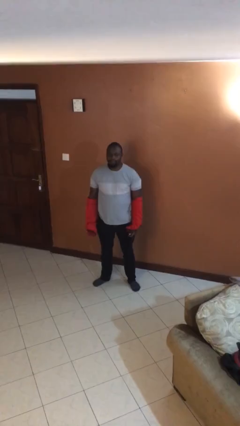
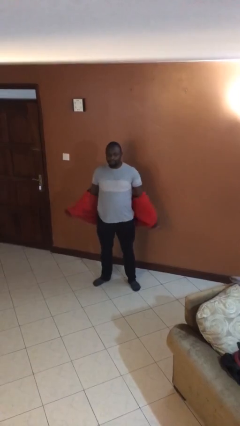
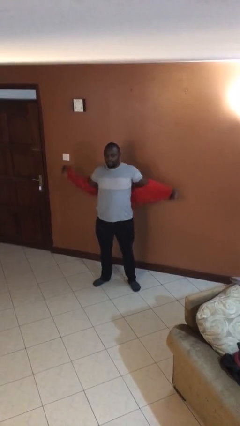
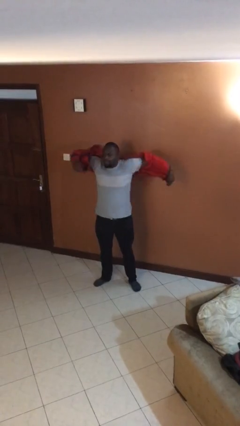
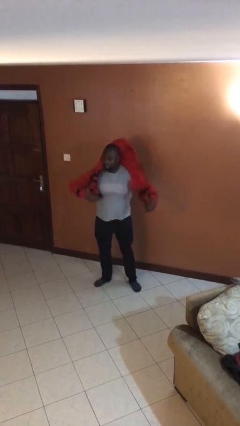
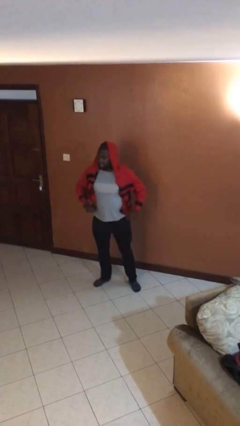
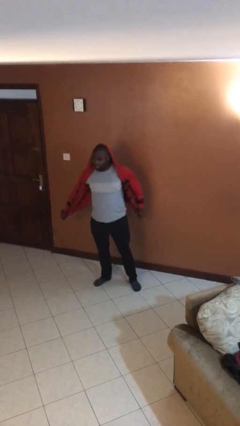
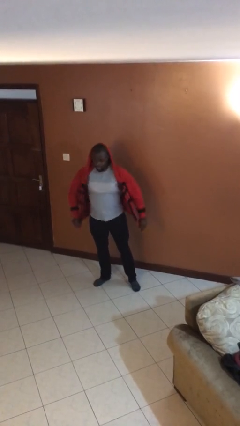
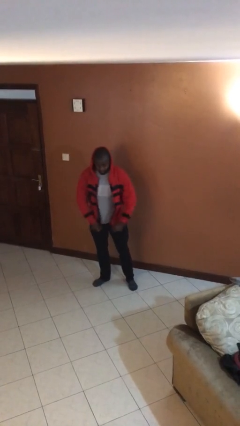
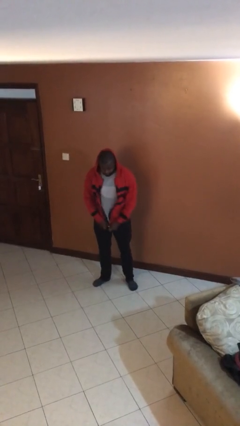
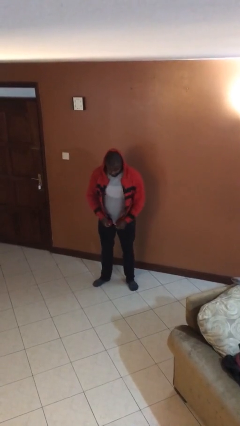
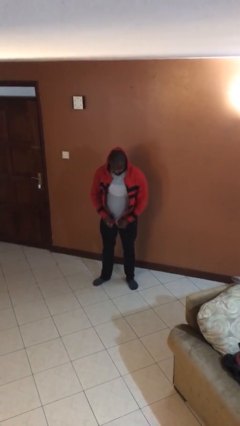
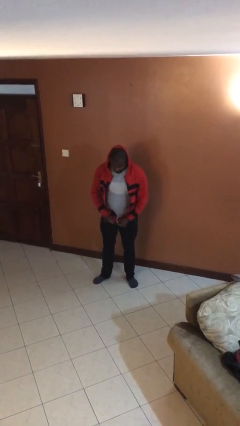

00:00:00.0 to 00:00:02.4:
person puts on jacket

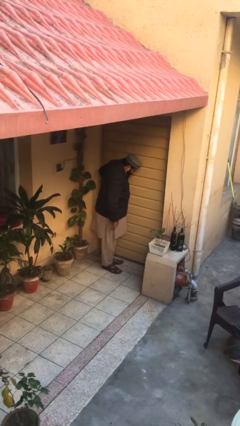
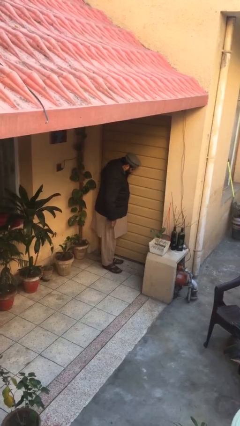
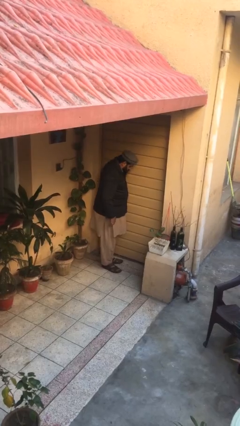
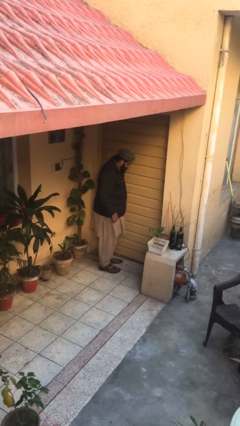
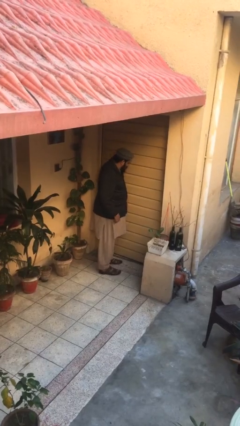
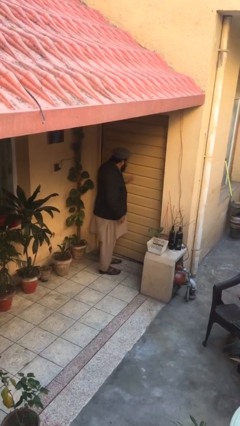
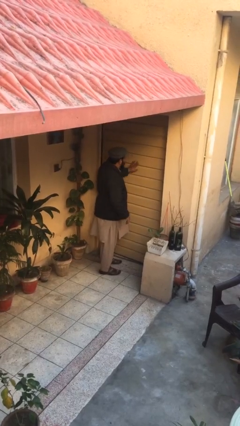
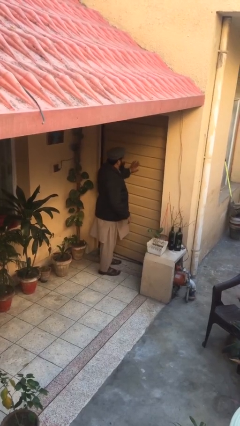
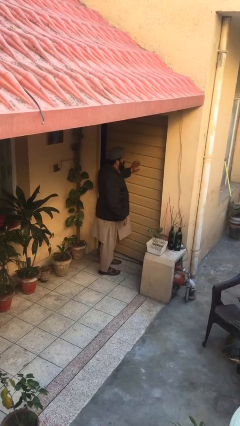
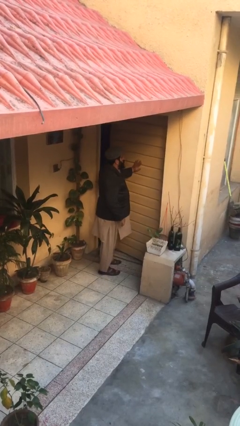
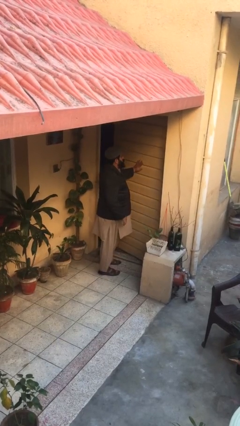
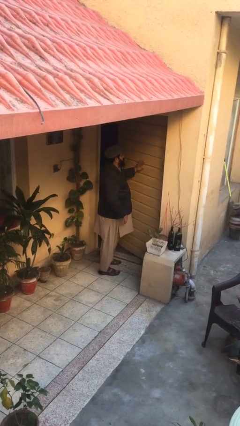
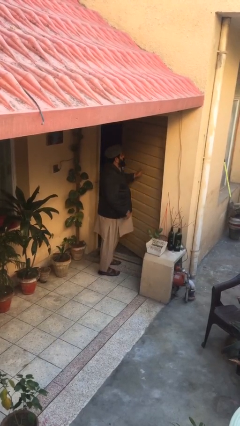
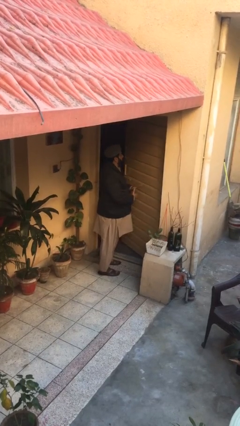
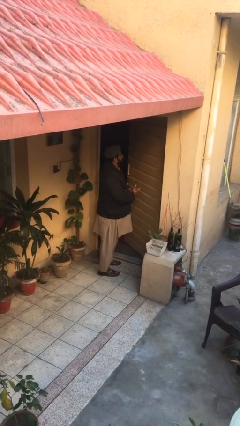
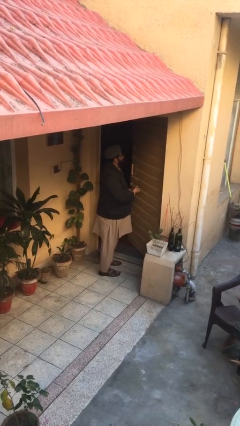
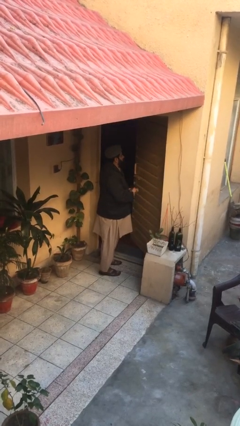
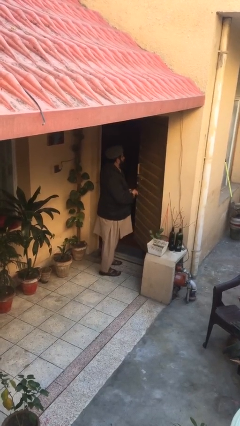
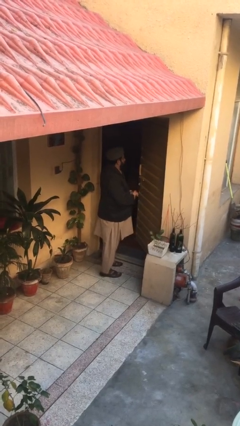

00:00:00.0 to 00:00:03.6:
person opens facility door

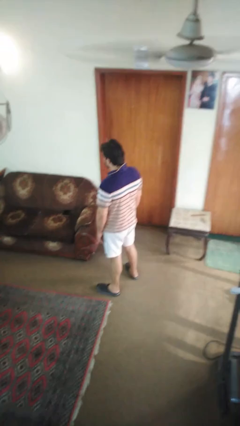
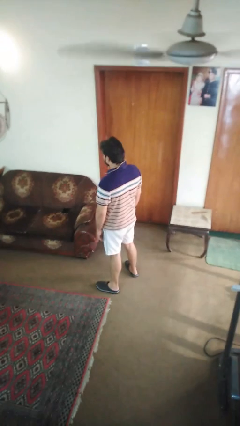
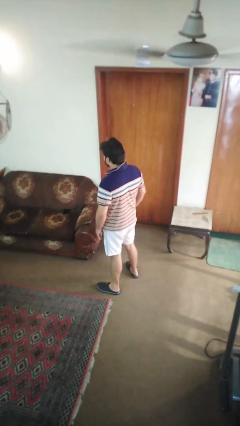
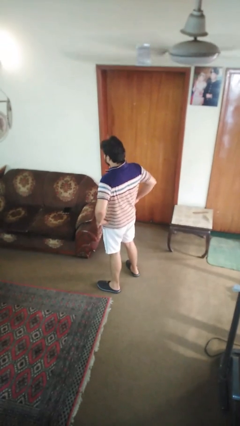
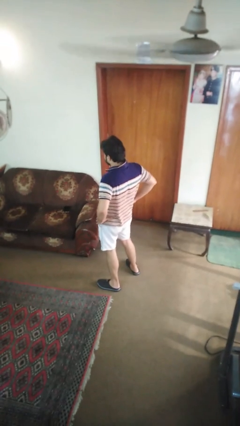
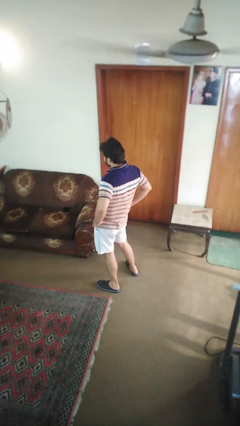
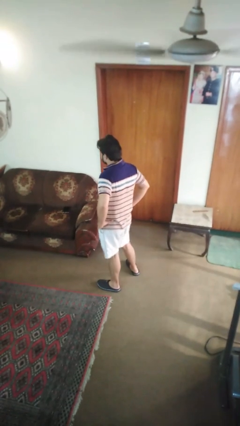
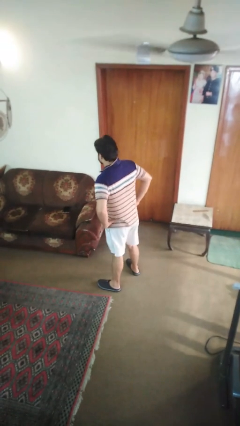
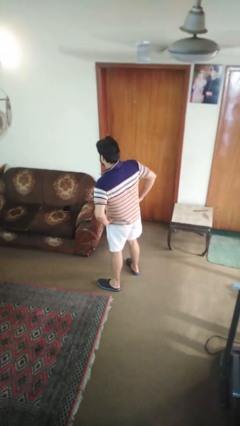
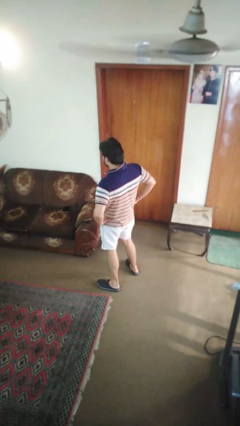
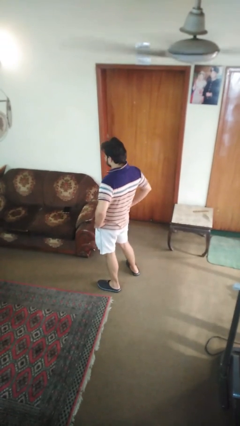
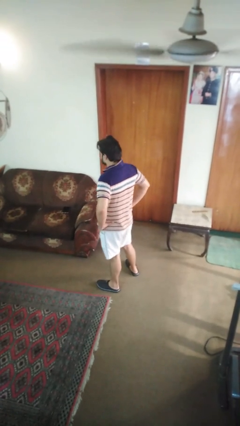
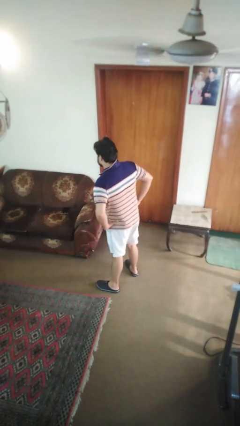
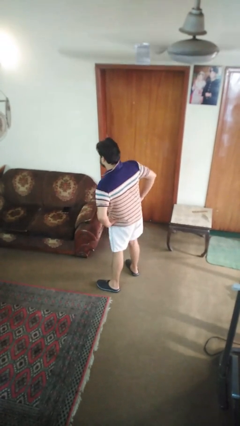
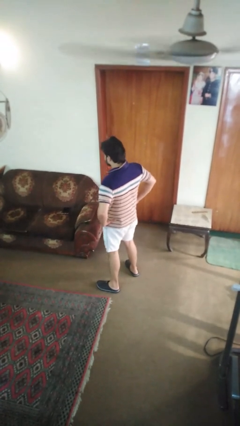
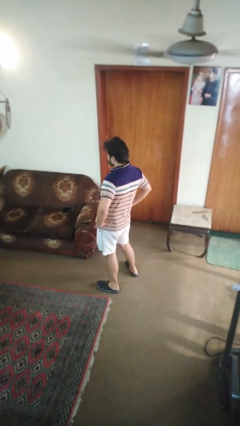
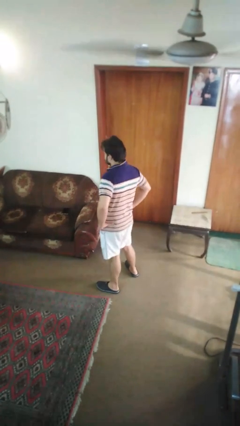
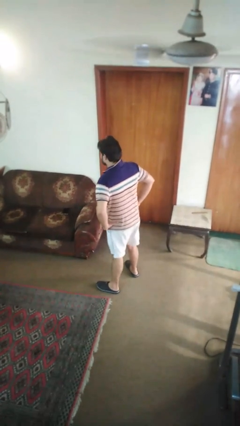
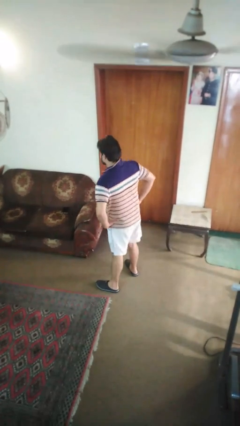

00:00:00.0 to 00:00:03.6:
person wiggles hips

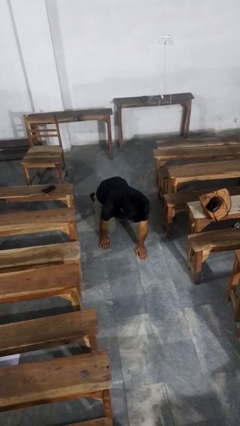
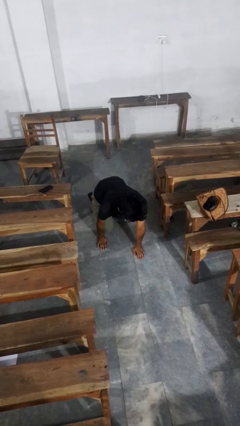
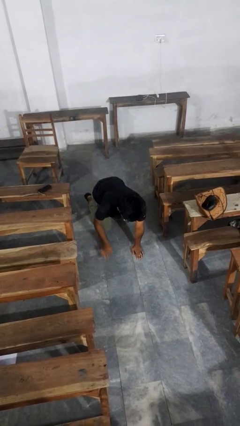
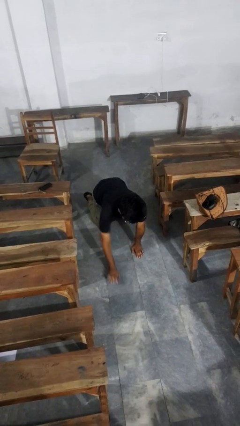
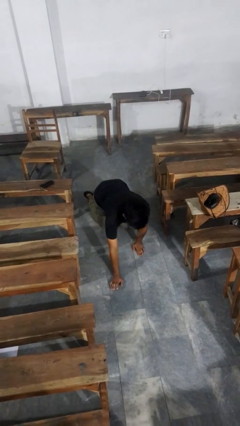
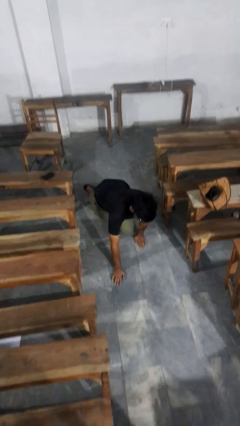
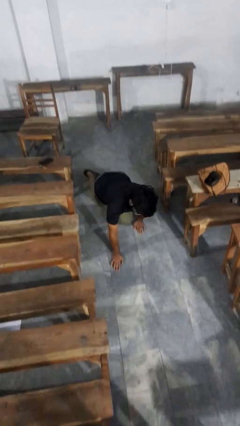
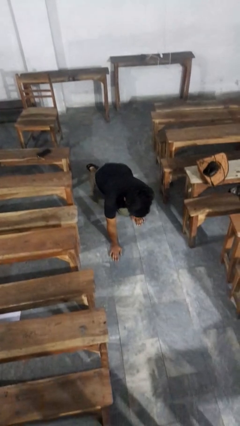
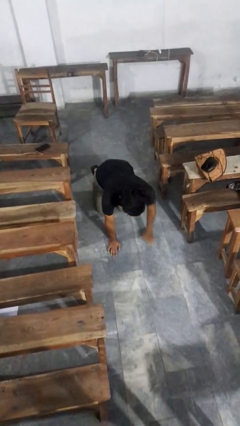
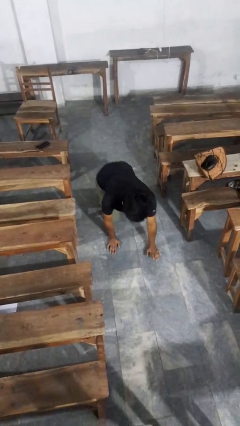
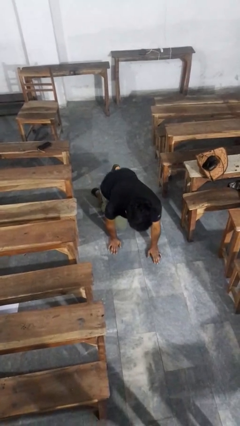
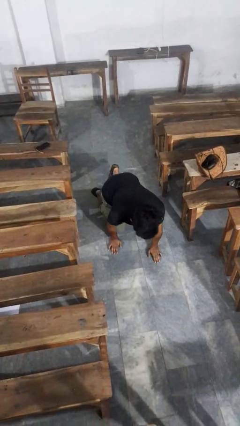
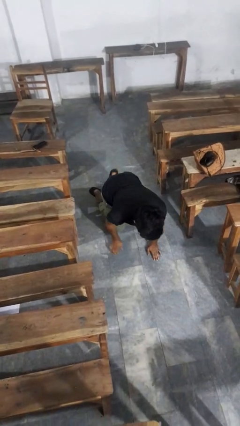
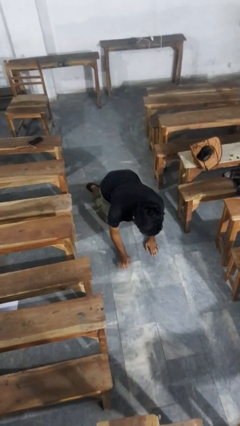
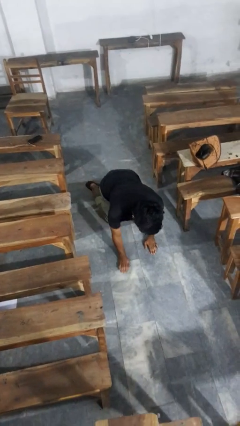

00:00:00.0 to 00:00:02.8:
person crawls

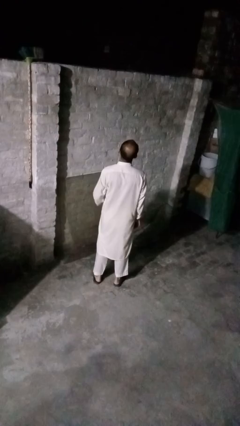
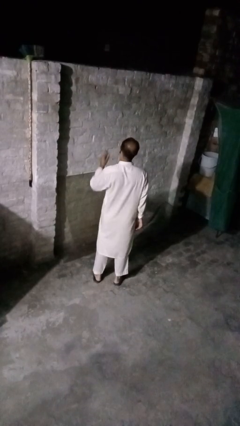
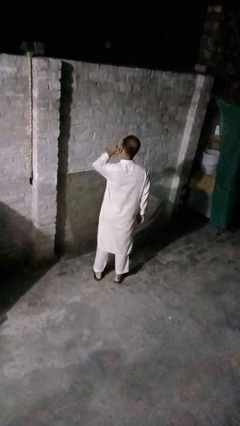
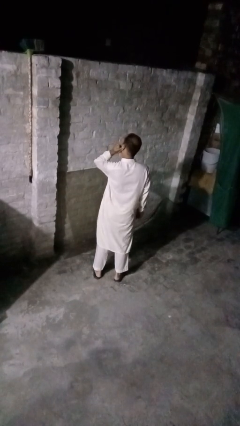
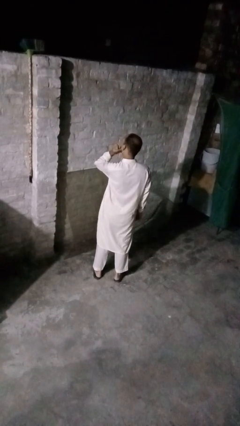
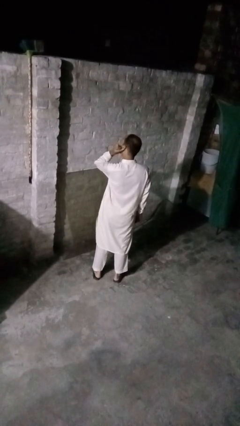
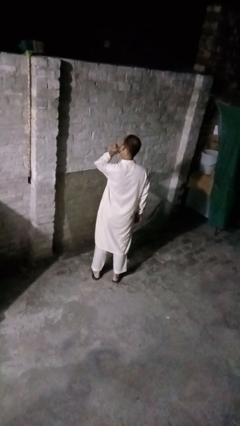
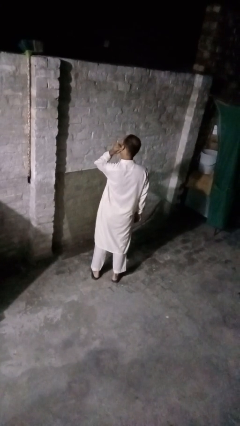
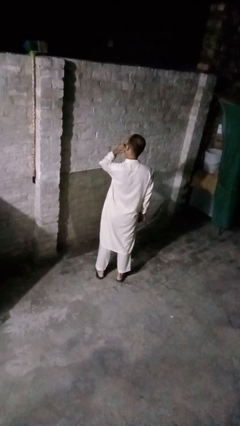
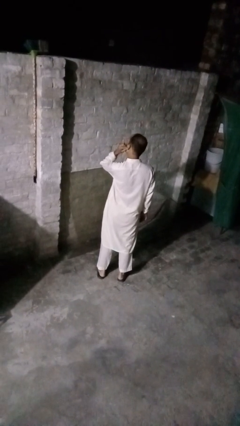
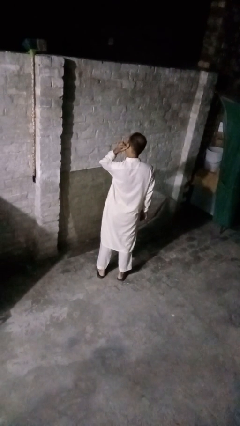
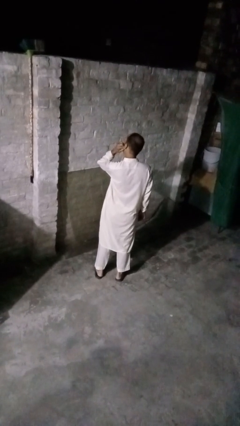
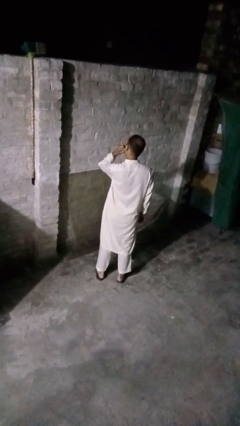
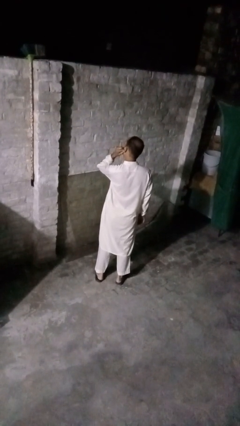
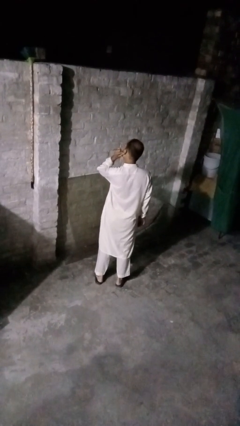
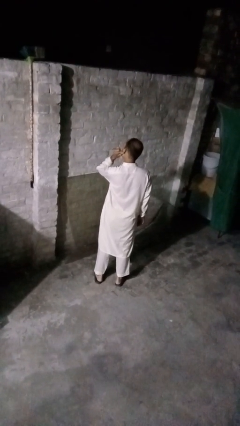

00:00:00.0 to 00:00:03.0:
person touches earlobe

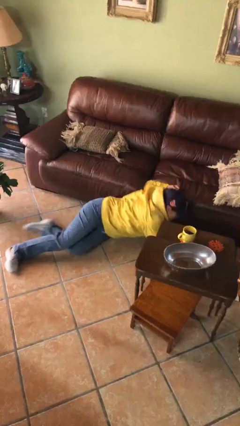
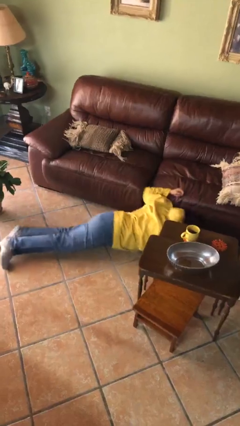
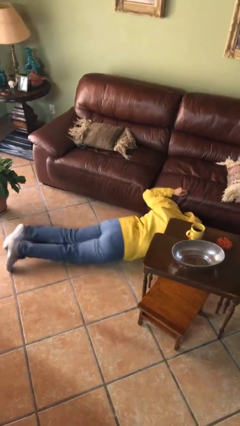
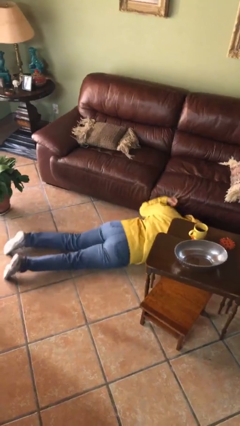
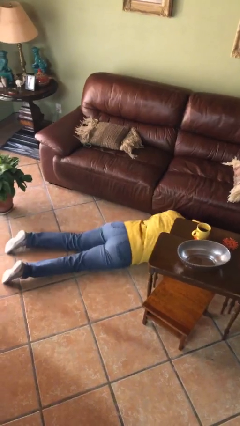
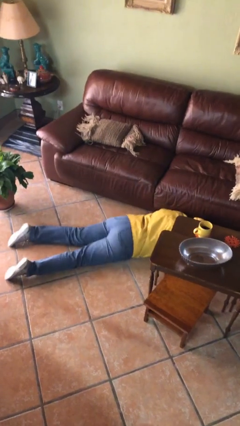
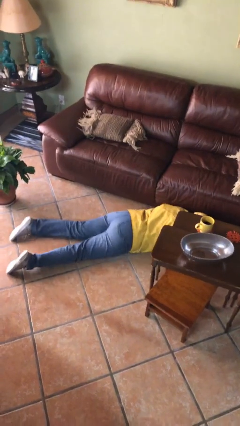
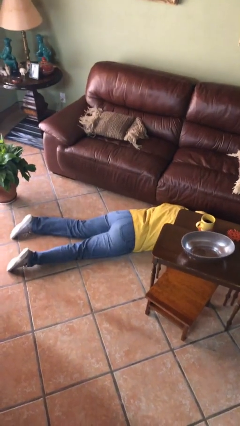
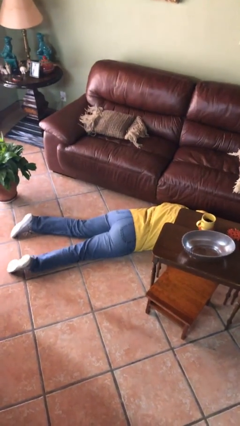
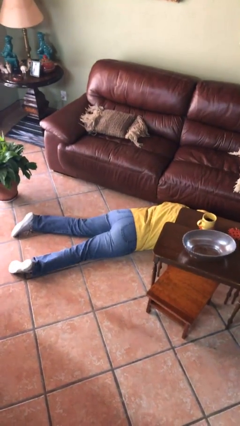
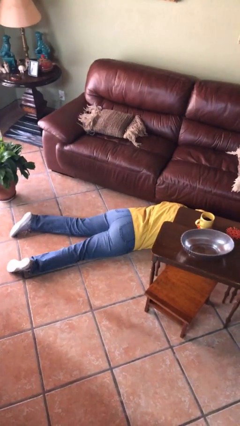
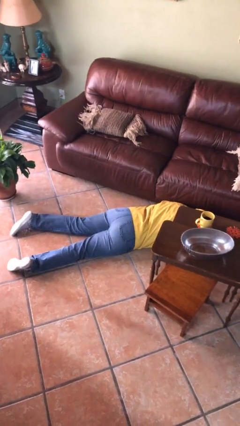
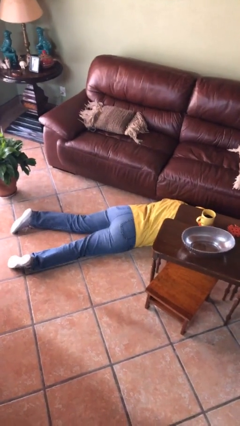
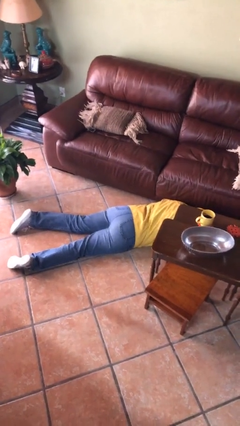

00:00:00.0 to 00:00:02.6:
person lies down on floor
